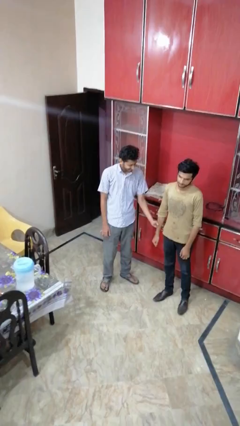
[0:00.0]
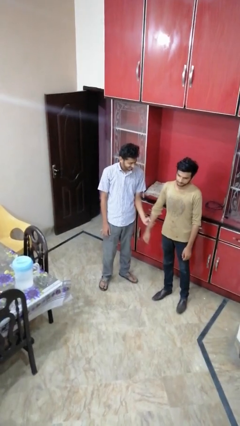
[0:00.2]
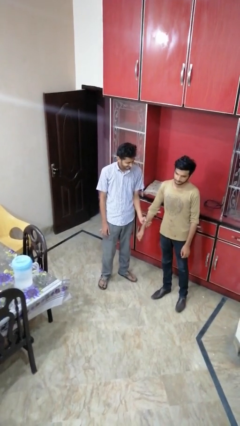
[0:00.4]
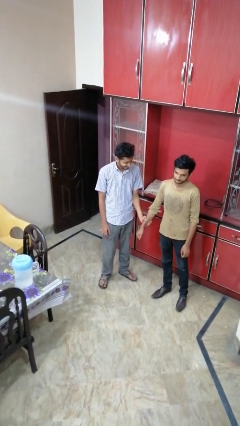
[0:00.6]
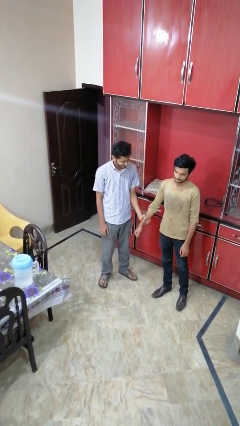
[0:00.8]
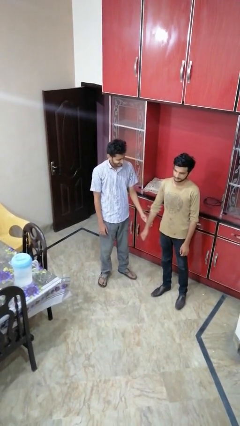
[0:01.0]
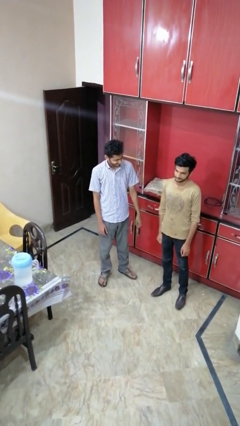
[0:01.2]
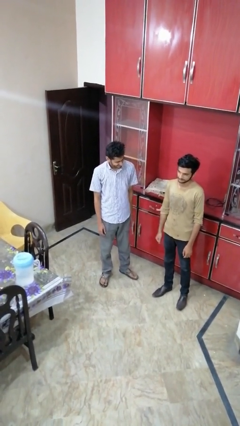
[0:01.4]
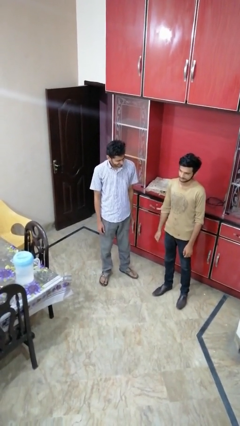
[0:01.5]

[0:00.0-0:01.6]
person grabs person by forearm

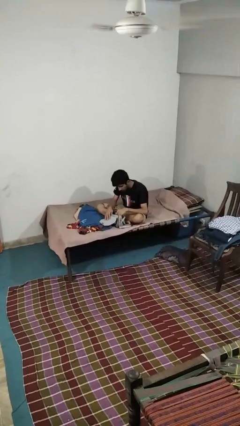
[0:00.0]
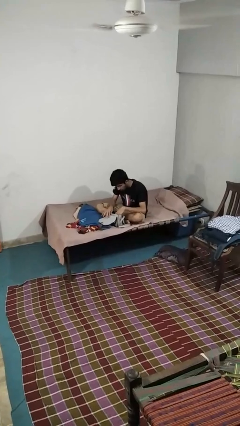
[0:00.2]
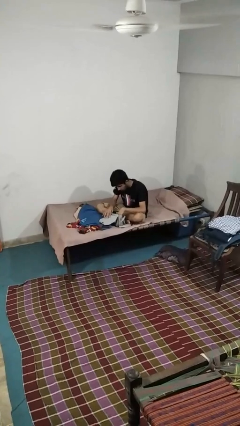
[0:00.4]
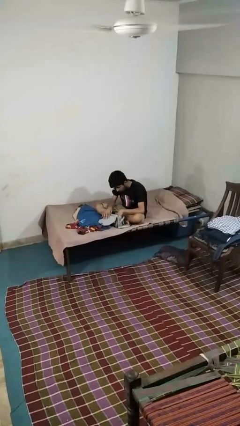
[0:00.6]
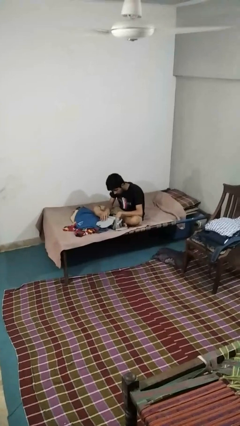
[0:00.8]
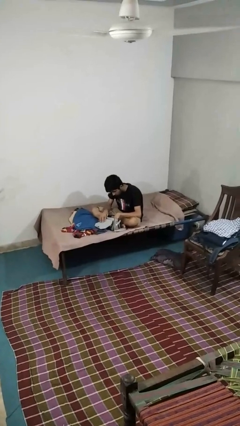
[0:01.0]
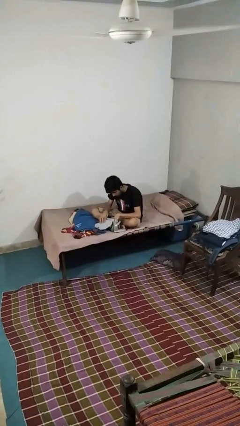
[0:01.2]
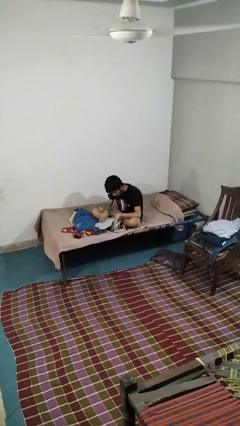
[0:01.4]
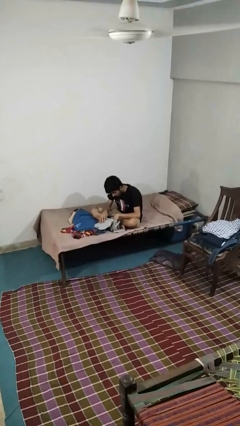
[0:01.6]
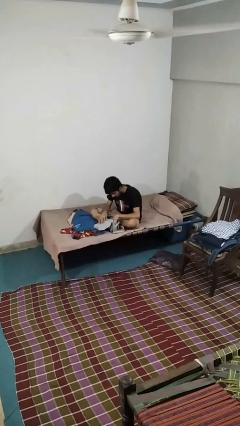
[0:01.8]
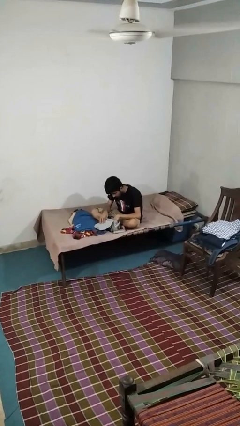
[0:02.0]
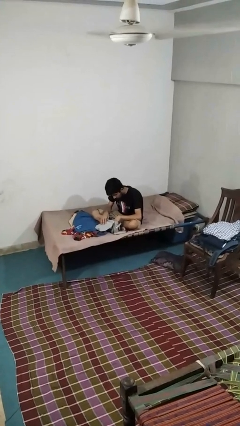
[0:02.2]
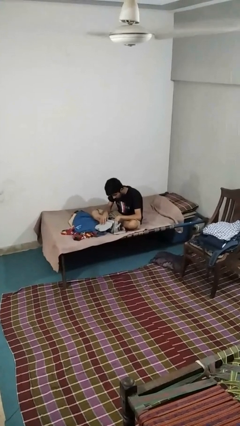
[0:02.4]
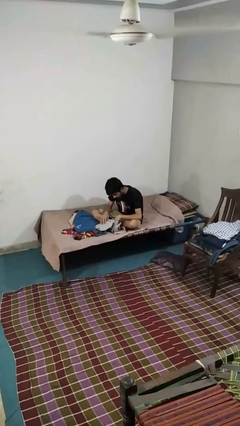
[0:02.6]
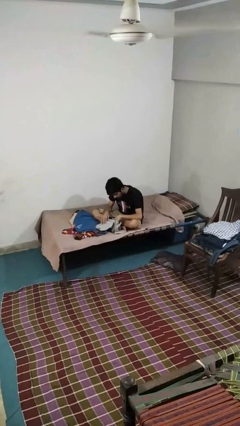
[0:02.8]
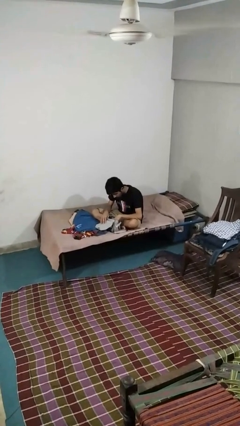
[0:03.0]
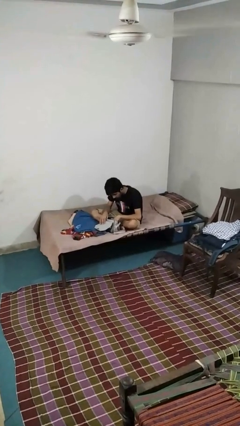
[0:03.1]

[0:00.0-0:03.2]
person searches in purse

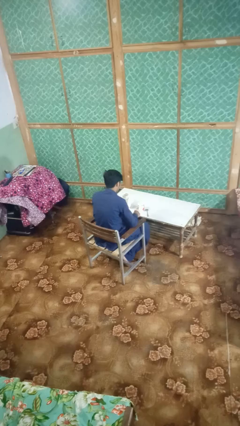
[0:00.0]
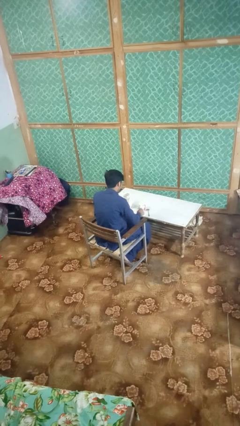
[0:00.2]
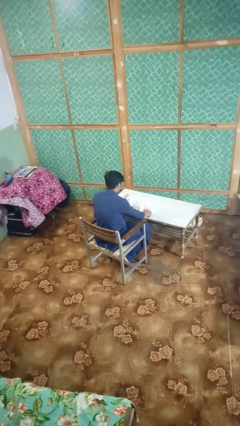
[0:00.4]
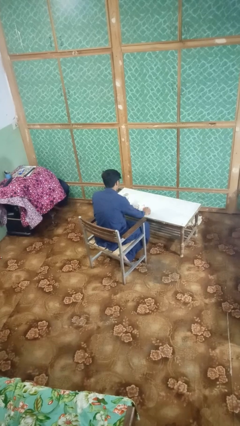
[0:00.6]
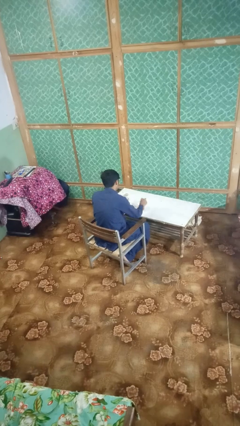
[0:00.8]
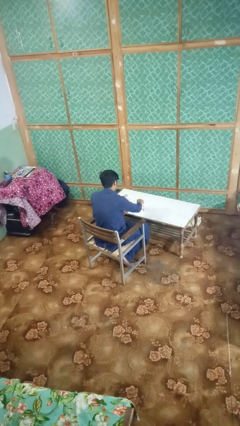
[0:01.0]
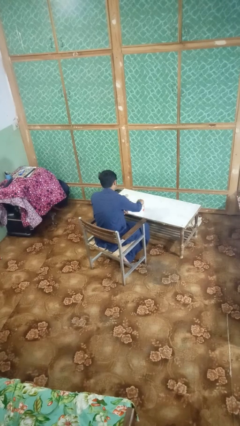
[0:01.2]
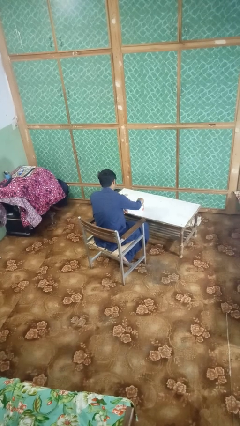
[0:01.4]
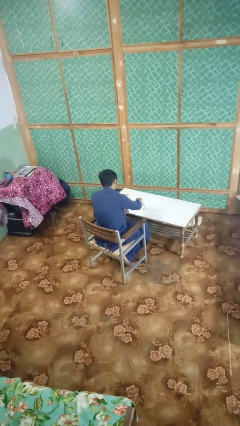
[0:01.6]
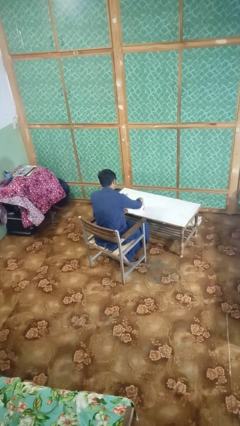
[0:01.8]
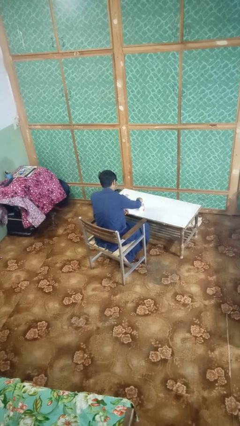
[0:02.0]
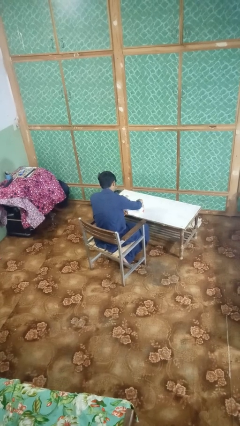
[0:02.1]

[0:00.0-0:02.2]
person stirs mug

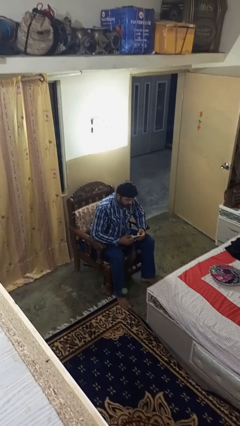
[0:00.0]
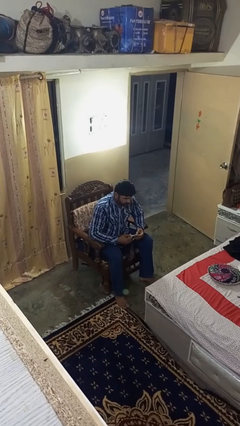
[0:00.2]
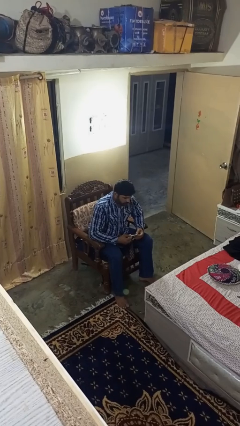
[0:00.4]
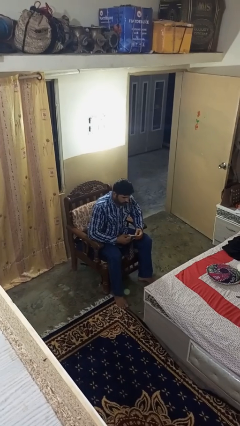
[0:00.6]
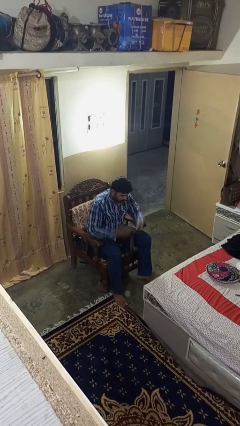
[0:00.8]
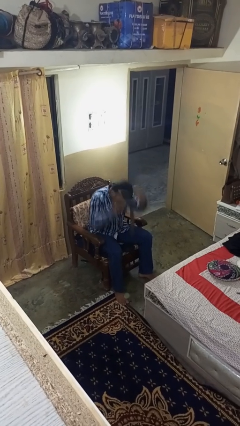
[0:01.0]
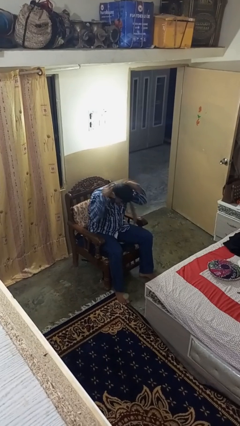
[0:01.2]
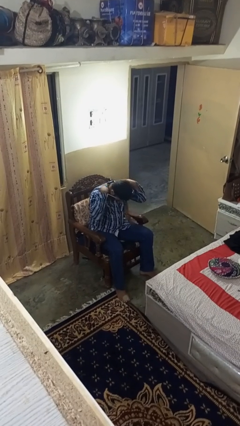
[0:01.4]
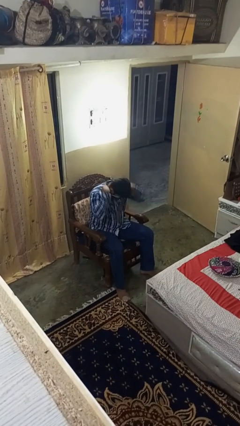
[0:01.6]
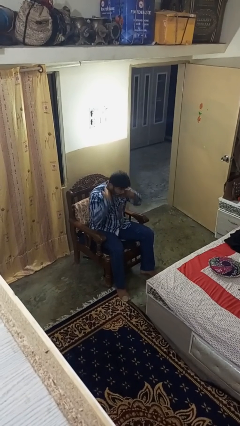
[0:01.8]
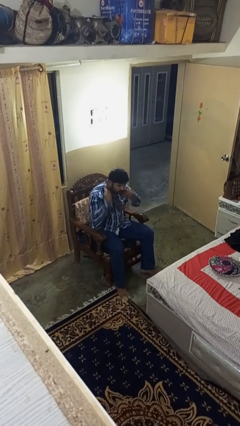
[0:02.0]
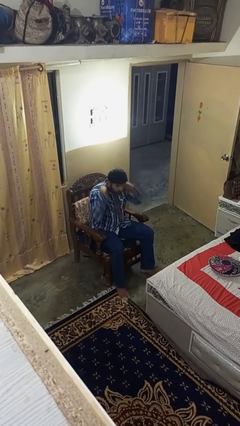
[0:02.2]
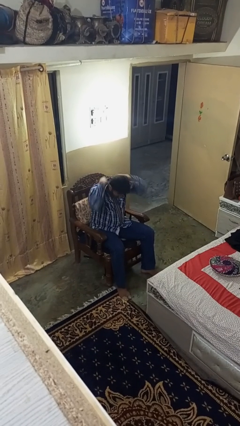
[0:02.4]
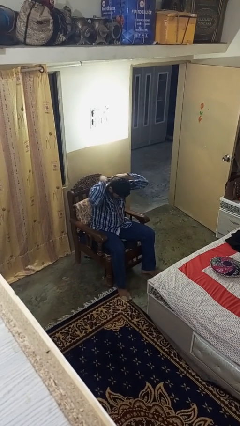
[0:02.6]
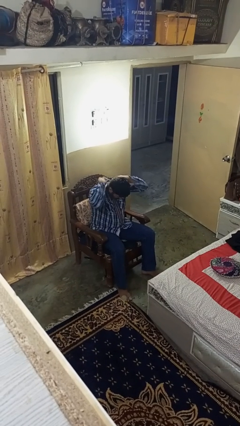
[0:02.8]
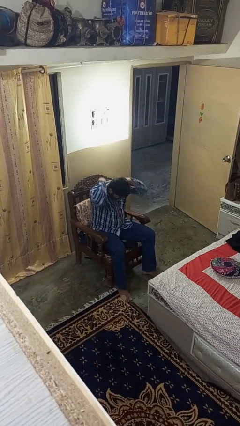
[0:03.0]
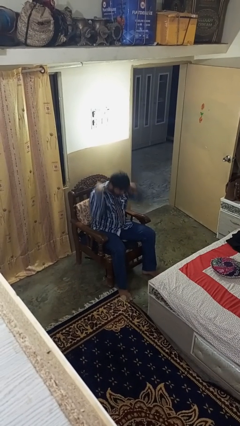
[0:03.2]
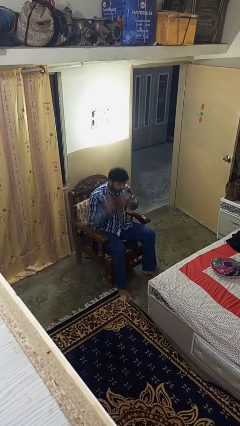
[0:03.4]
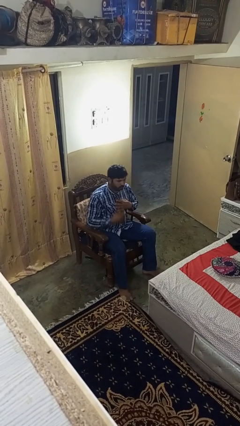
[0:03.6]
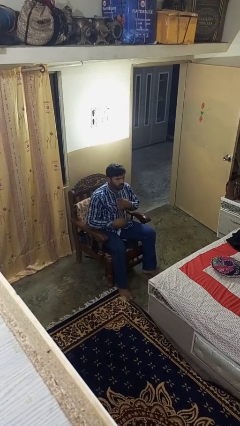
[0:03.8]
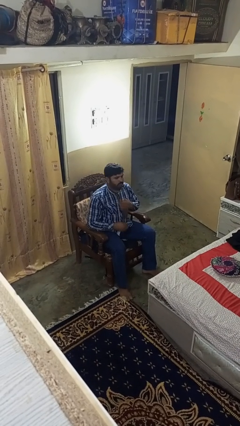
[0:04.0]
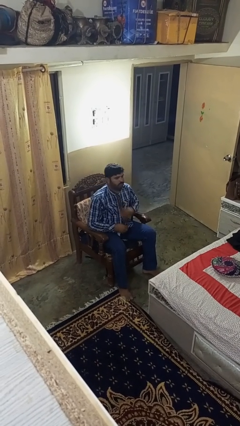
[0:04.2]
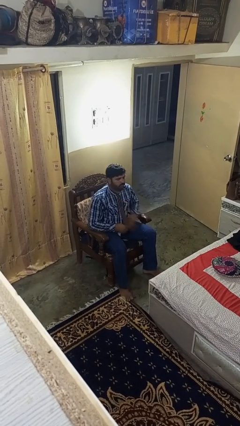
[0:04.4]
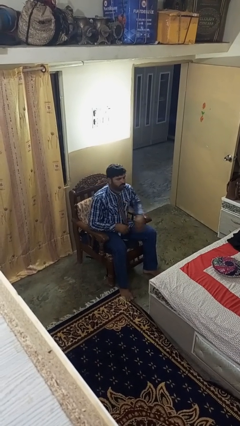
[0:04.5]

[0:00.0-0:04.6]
person puts on necktie

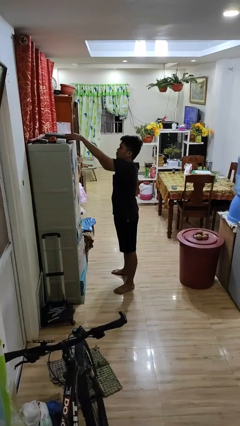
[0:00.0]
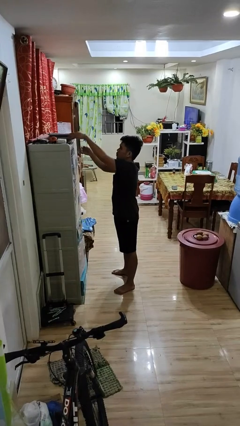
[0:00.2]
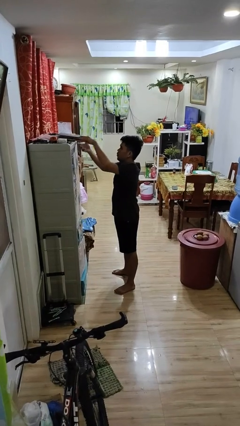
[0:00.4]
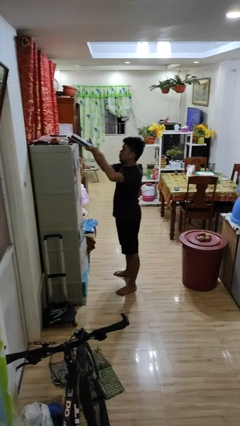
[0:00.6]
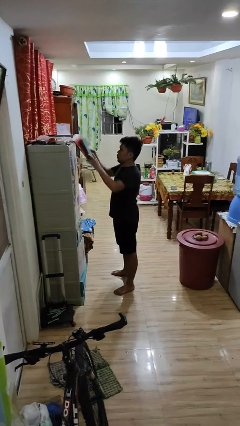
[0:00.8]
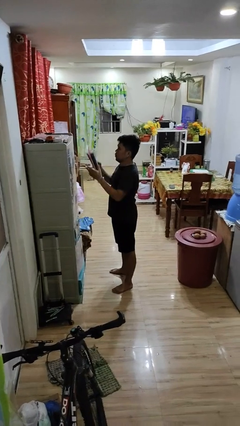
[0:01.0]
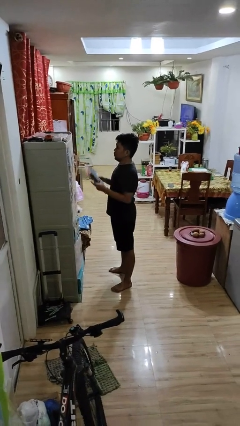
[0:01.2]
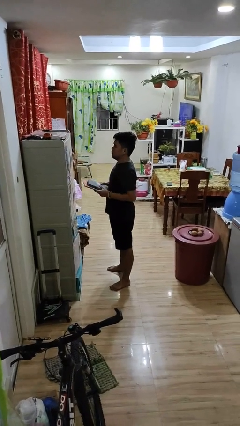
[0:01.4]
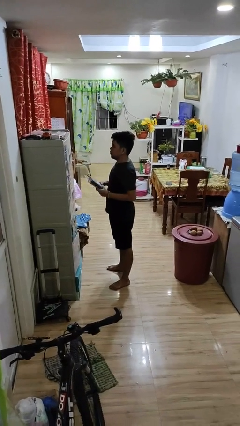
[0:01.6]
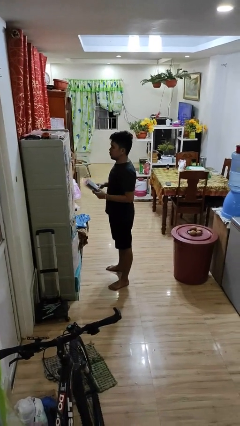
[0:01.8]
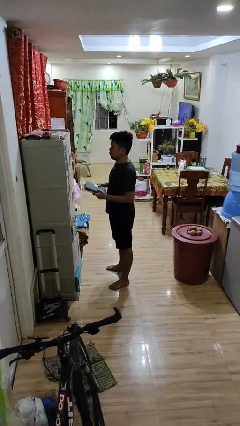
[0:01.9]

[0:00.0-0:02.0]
person picks up object from shelf

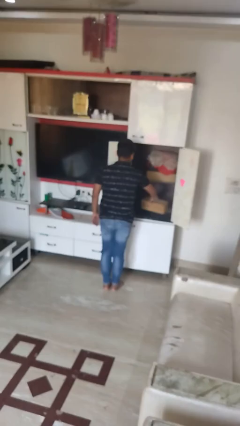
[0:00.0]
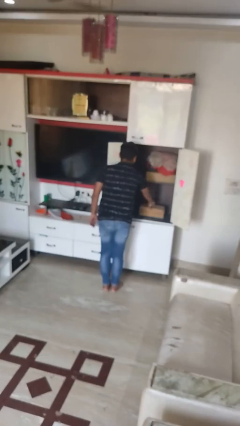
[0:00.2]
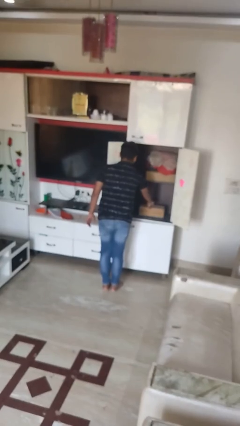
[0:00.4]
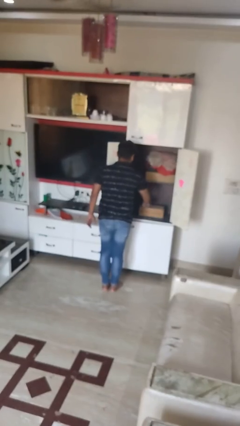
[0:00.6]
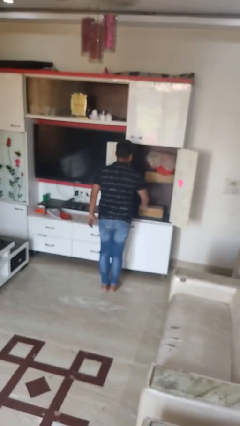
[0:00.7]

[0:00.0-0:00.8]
person puts down object into cabinet

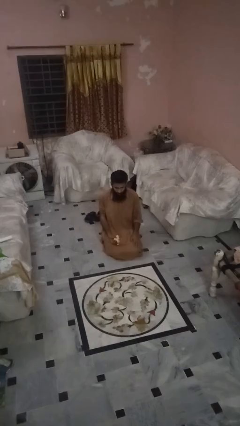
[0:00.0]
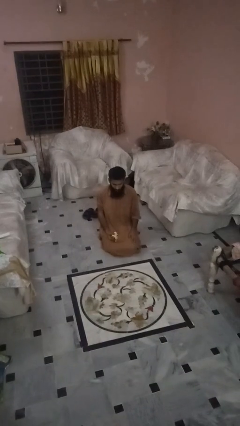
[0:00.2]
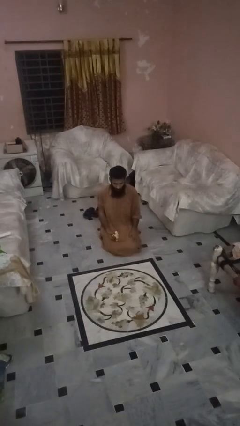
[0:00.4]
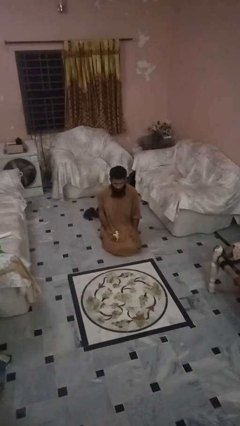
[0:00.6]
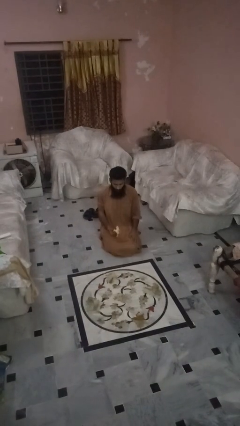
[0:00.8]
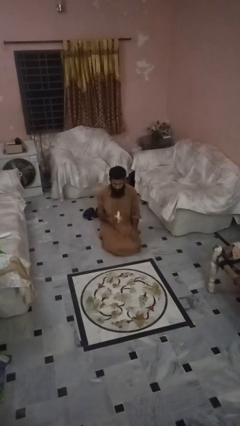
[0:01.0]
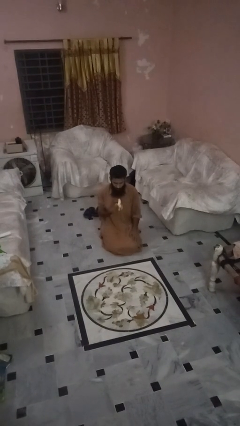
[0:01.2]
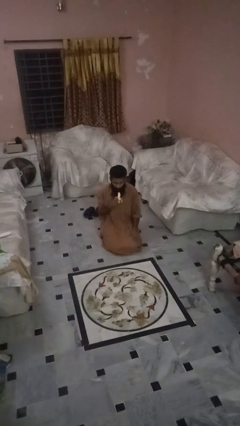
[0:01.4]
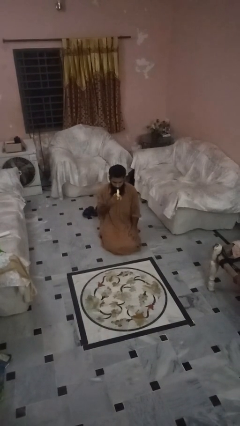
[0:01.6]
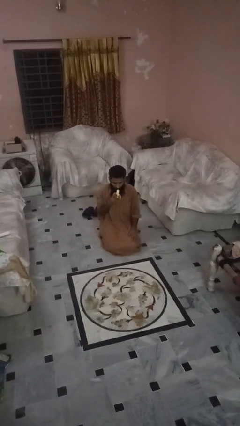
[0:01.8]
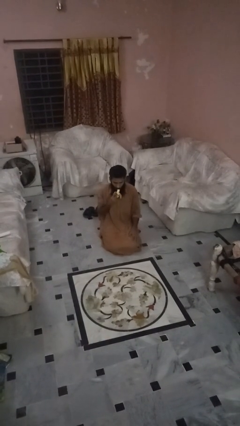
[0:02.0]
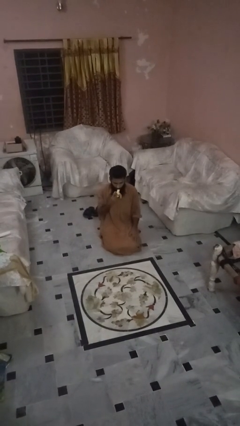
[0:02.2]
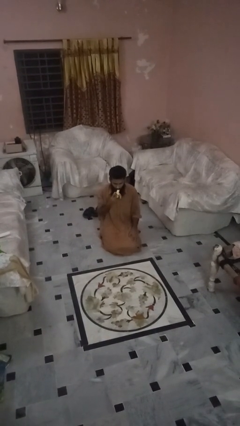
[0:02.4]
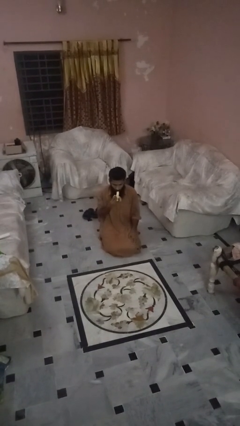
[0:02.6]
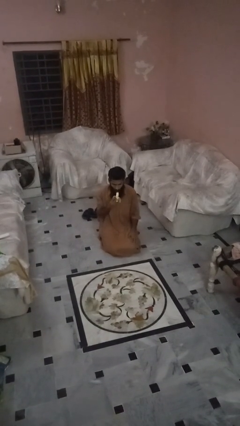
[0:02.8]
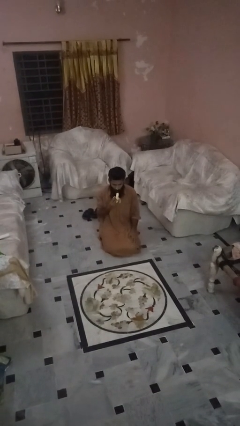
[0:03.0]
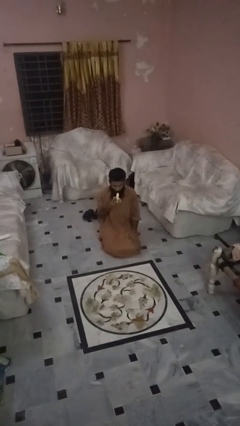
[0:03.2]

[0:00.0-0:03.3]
person eats banana
